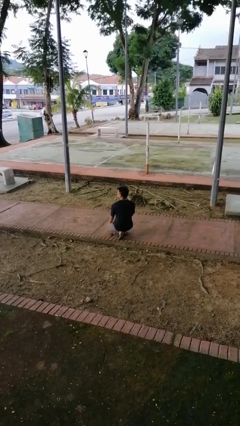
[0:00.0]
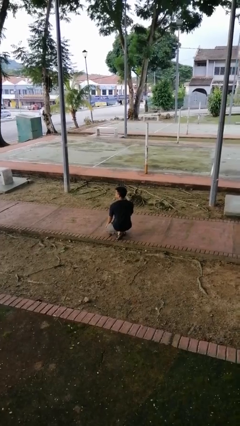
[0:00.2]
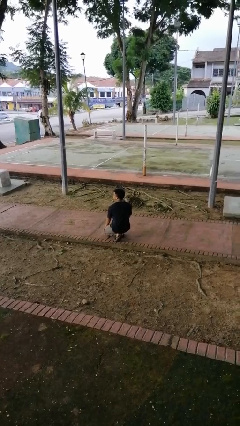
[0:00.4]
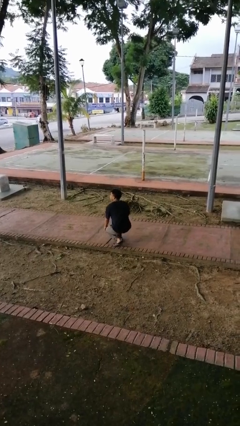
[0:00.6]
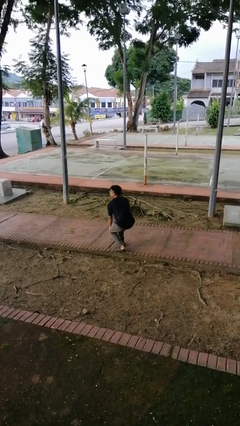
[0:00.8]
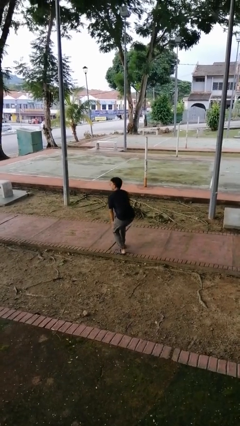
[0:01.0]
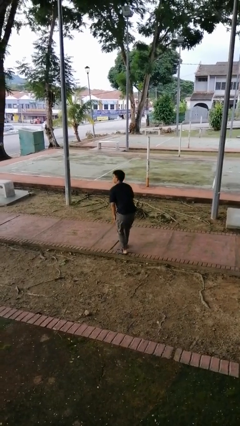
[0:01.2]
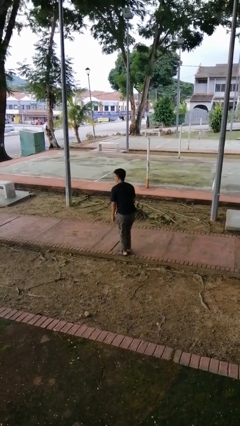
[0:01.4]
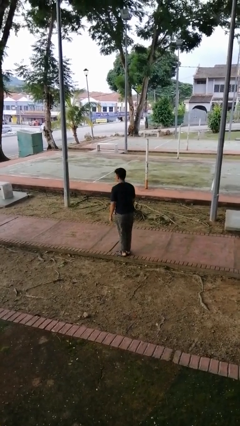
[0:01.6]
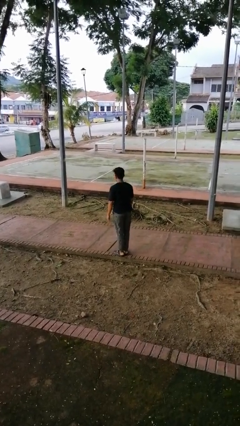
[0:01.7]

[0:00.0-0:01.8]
person stands up from floor

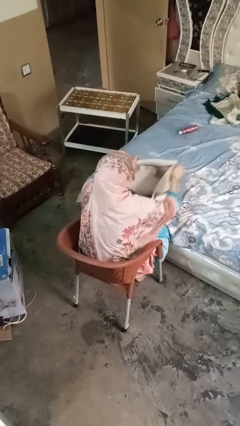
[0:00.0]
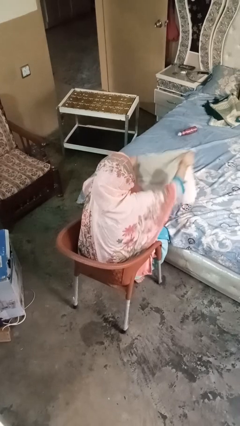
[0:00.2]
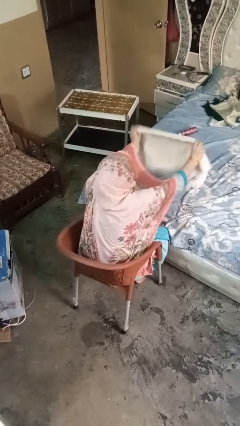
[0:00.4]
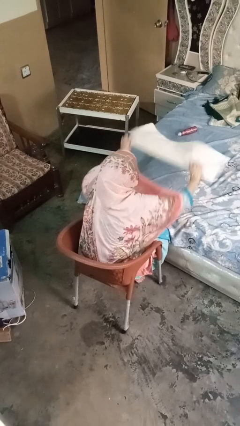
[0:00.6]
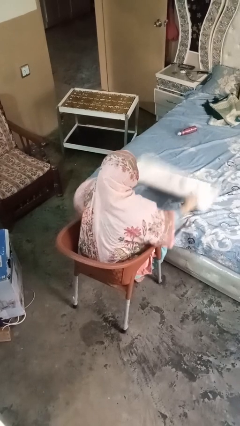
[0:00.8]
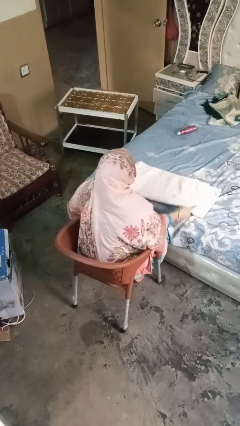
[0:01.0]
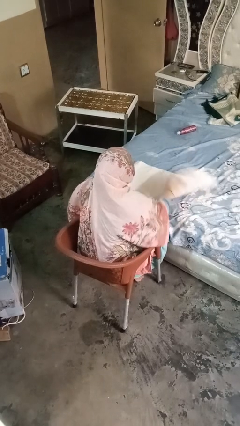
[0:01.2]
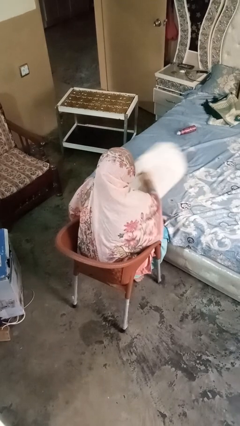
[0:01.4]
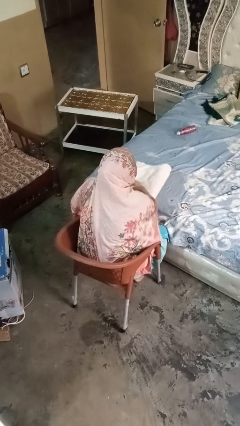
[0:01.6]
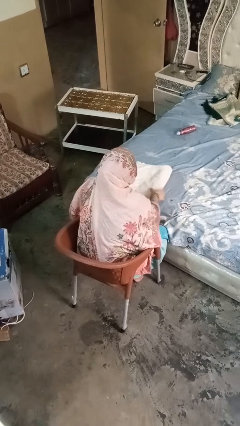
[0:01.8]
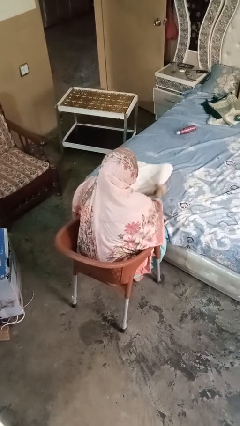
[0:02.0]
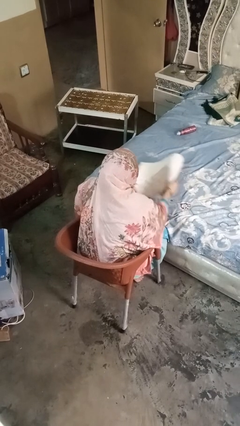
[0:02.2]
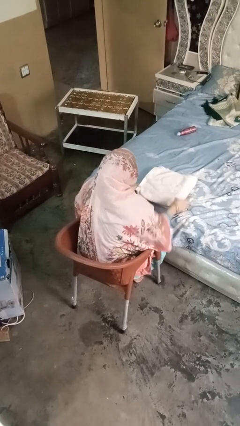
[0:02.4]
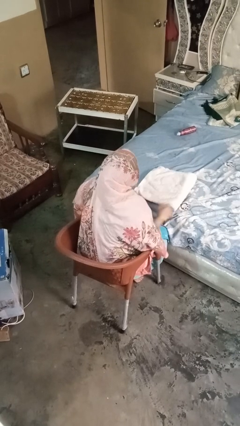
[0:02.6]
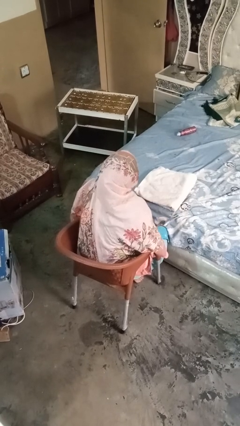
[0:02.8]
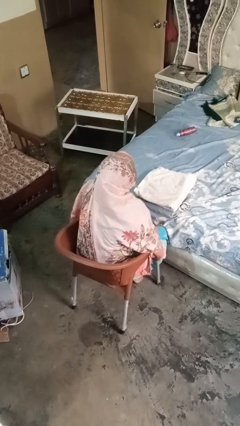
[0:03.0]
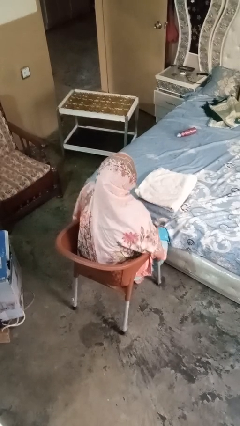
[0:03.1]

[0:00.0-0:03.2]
person folds towel

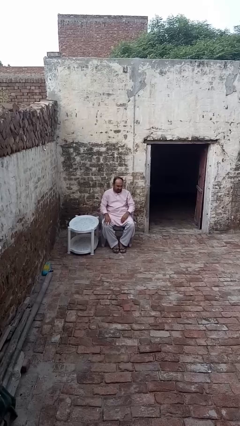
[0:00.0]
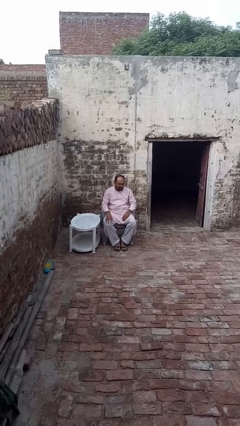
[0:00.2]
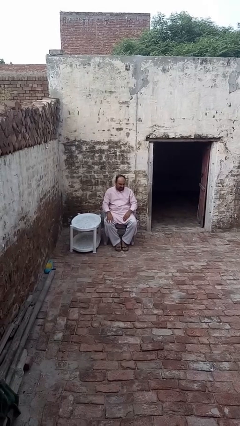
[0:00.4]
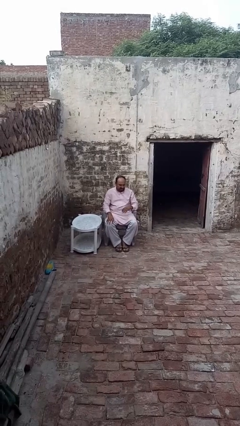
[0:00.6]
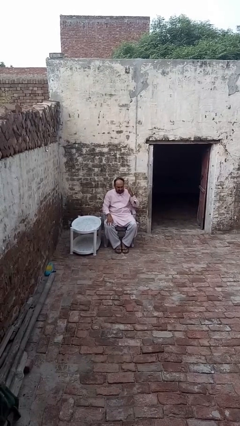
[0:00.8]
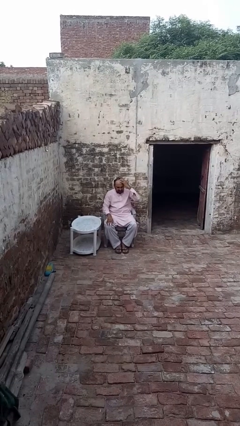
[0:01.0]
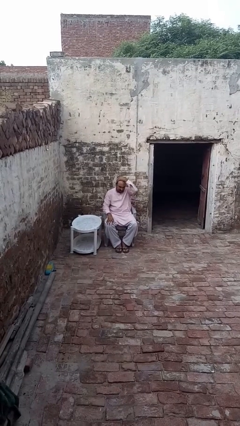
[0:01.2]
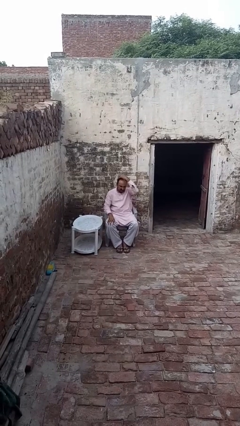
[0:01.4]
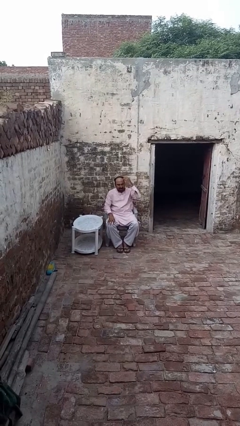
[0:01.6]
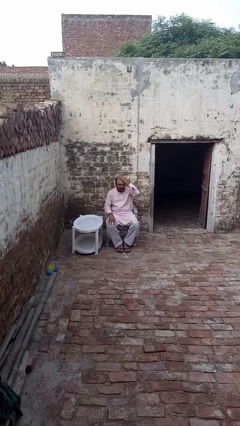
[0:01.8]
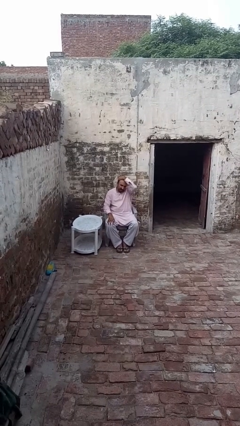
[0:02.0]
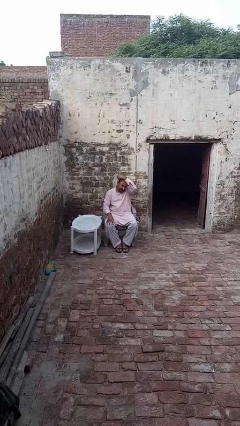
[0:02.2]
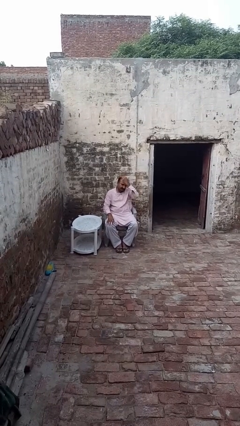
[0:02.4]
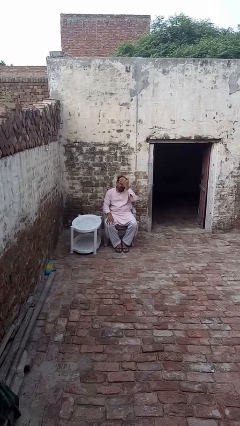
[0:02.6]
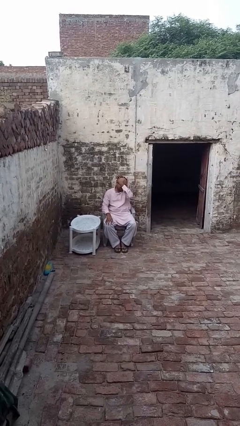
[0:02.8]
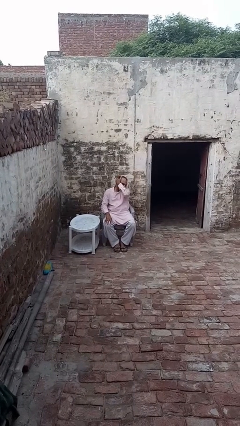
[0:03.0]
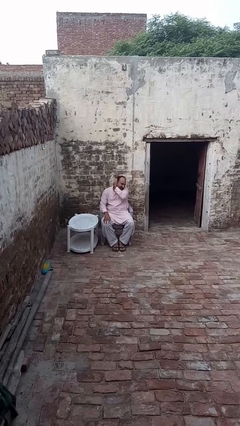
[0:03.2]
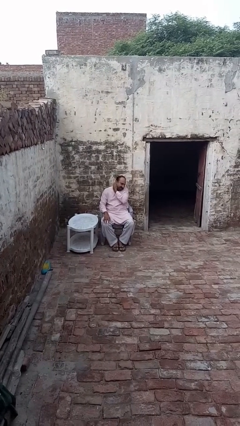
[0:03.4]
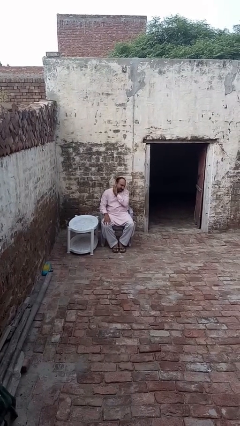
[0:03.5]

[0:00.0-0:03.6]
person strokes hair

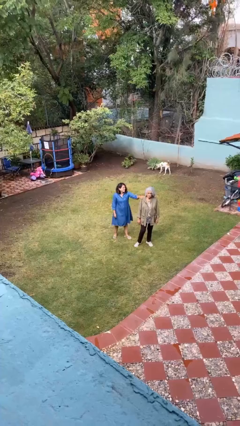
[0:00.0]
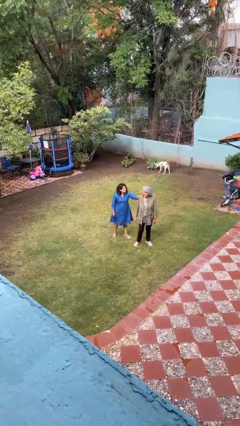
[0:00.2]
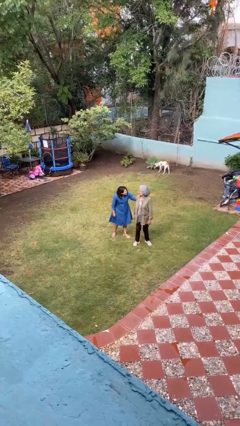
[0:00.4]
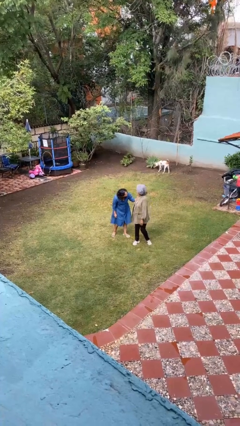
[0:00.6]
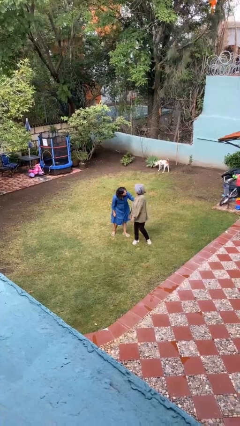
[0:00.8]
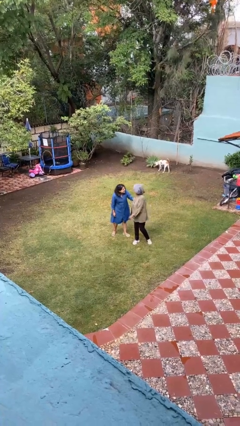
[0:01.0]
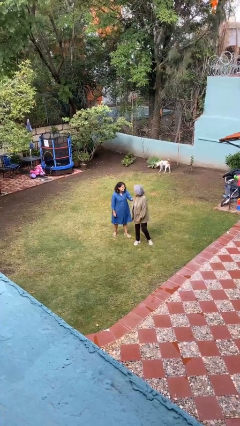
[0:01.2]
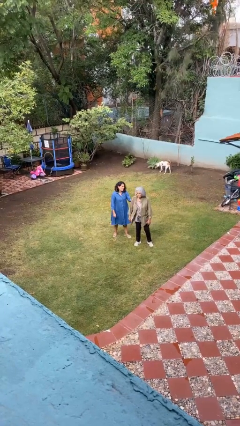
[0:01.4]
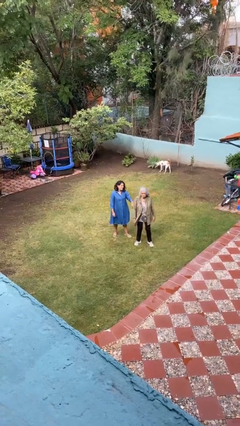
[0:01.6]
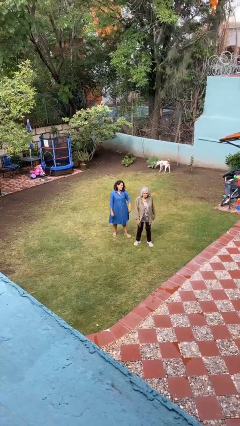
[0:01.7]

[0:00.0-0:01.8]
person spins person around

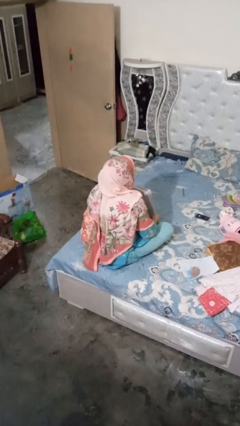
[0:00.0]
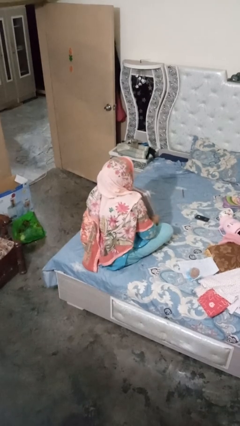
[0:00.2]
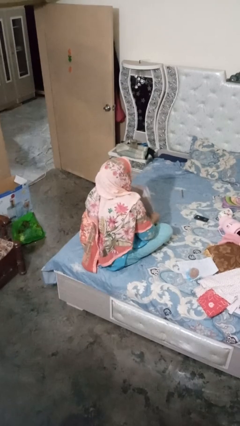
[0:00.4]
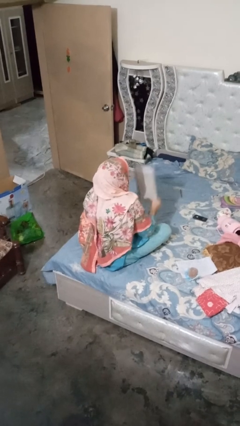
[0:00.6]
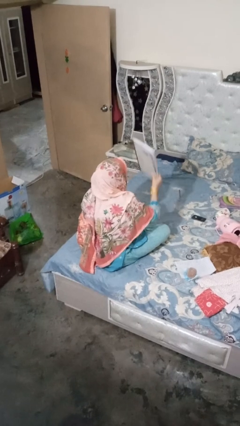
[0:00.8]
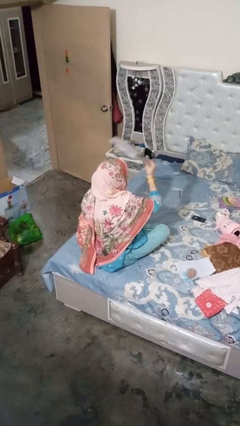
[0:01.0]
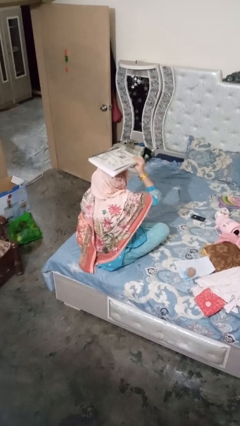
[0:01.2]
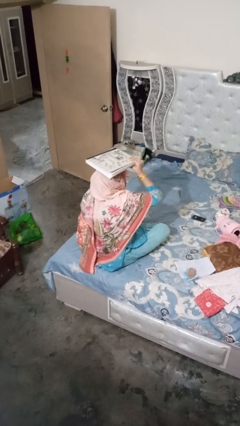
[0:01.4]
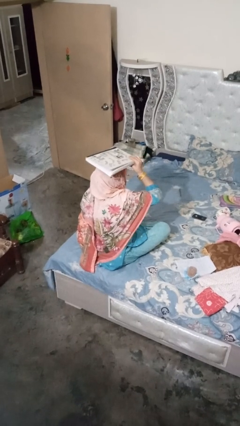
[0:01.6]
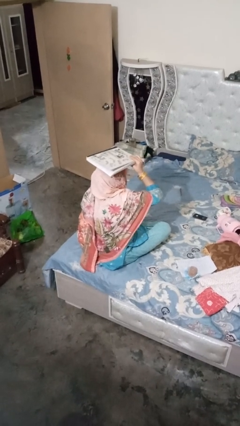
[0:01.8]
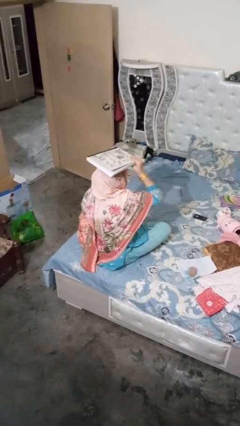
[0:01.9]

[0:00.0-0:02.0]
person holds object above head

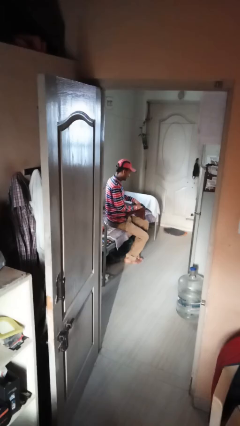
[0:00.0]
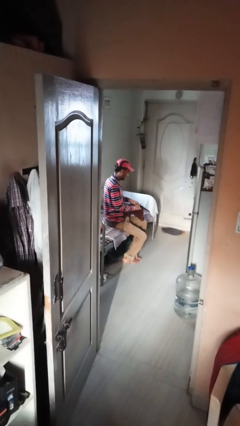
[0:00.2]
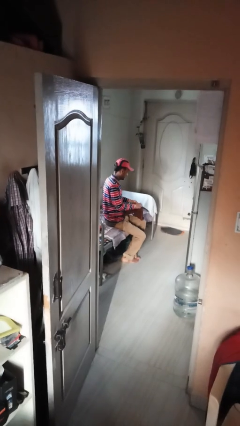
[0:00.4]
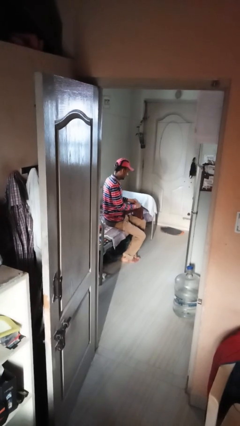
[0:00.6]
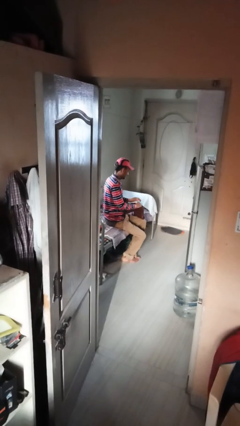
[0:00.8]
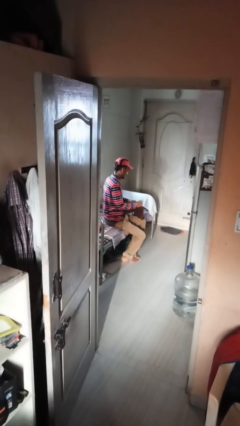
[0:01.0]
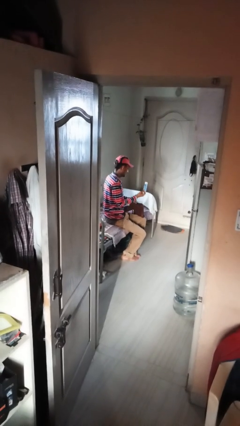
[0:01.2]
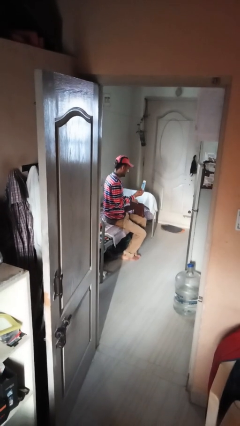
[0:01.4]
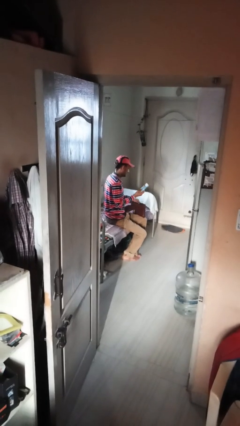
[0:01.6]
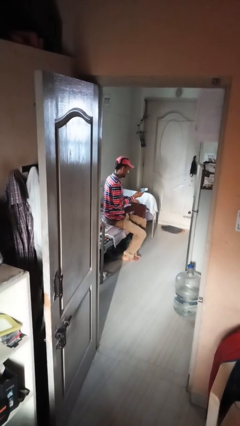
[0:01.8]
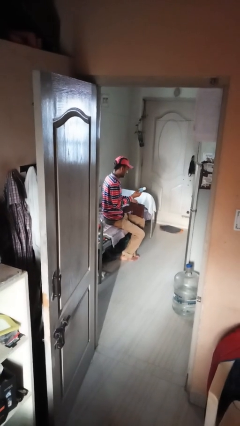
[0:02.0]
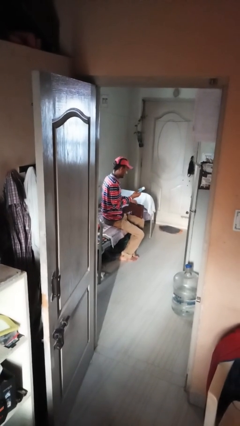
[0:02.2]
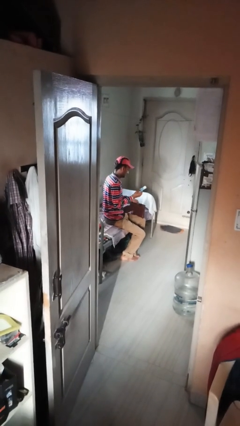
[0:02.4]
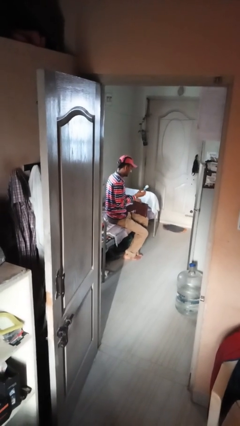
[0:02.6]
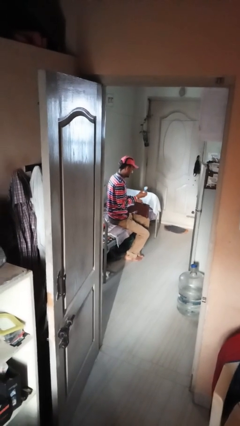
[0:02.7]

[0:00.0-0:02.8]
person takes object from purse

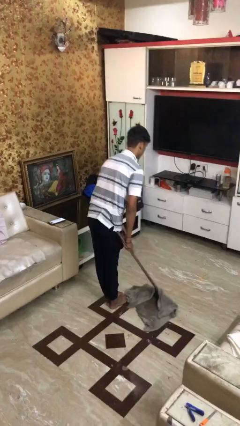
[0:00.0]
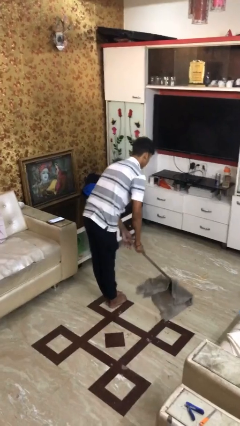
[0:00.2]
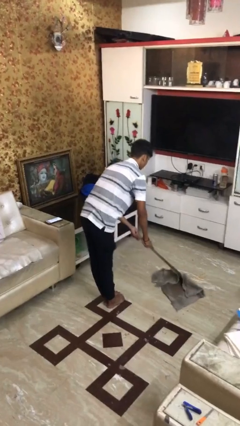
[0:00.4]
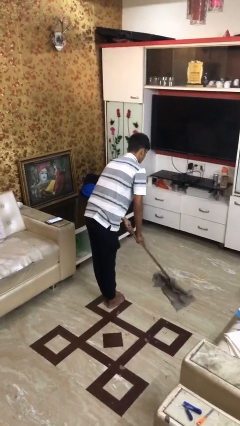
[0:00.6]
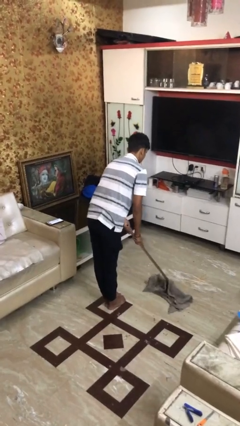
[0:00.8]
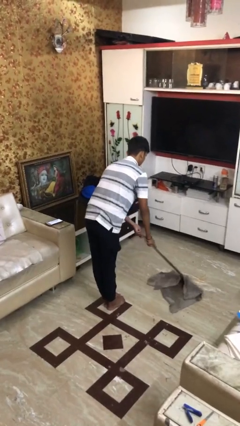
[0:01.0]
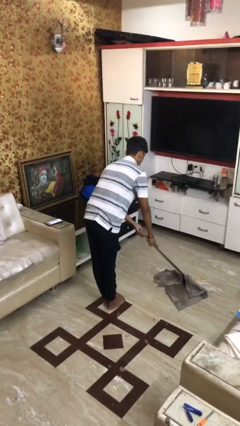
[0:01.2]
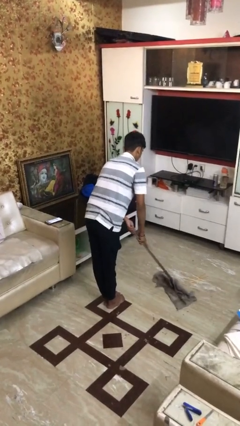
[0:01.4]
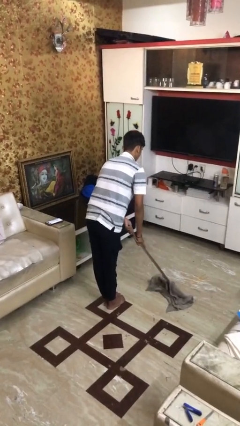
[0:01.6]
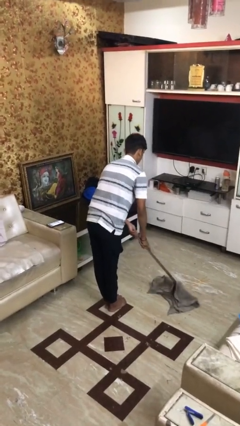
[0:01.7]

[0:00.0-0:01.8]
person mops

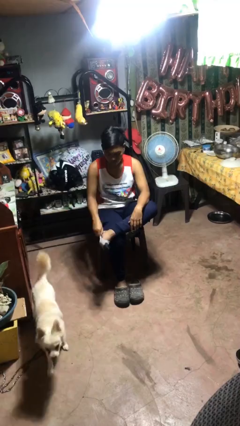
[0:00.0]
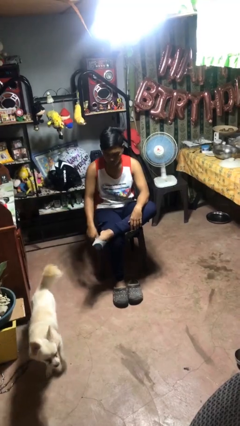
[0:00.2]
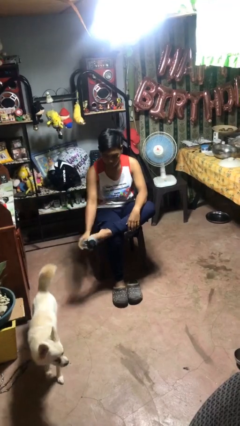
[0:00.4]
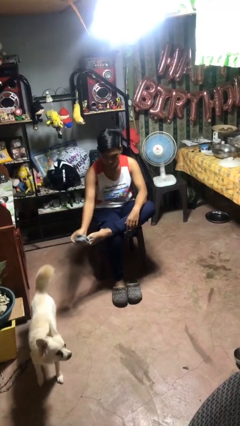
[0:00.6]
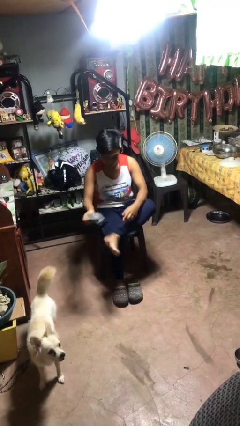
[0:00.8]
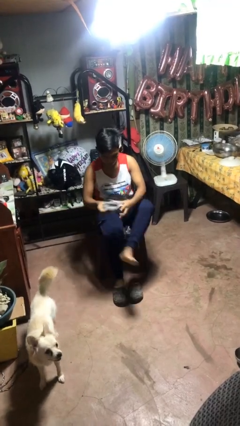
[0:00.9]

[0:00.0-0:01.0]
person takes off socks
